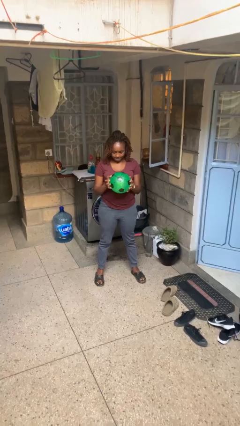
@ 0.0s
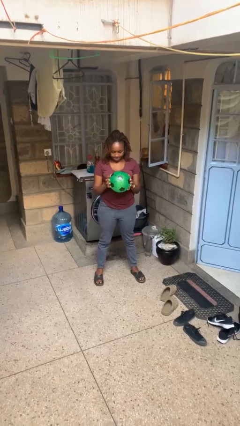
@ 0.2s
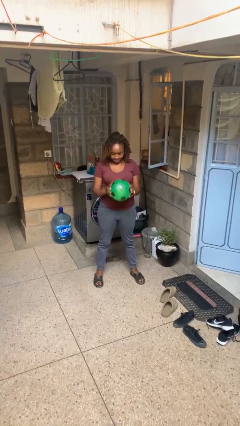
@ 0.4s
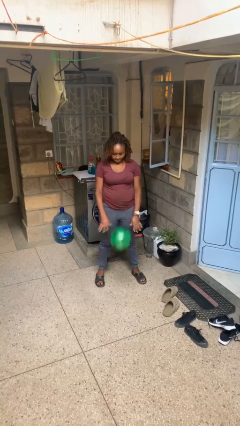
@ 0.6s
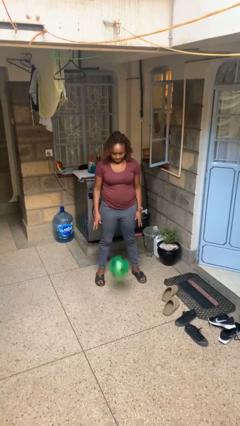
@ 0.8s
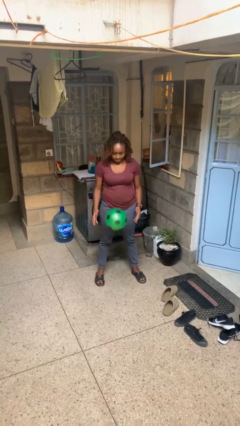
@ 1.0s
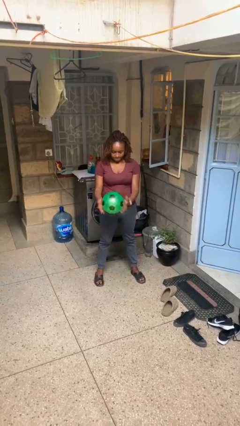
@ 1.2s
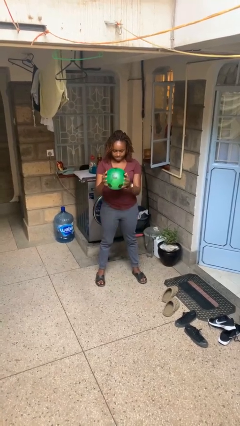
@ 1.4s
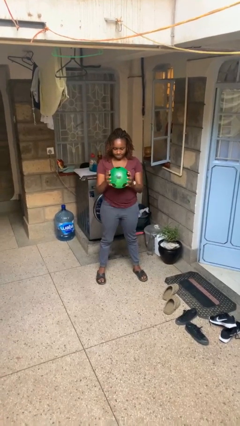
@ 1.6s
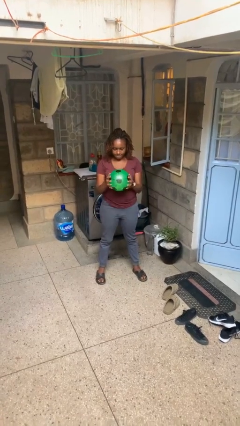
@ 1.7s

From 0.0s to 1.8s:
person bounces ball on floor

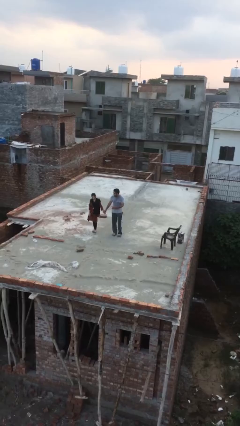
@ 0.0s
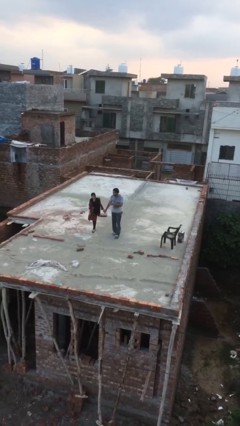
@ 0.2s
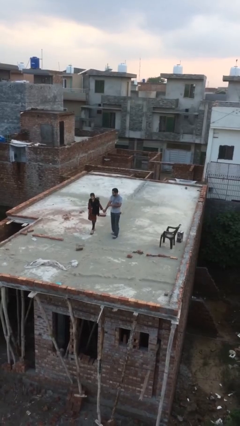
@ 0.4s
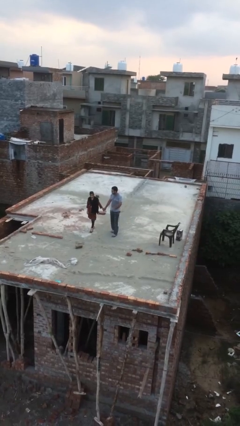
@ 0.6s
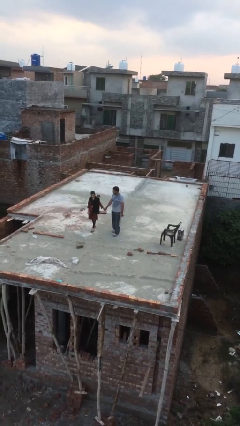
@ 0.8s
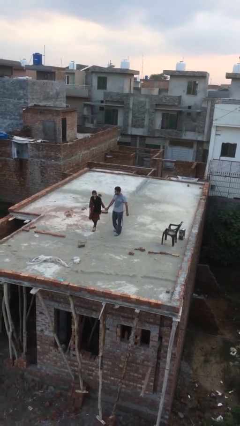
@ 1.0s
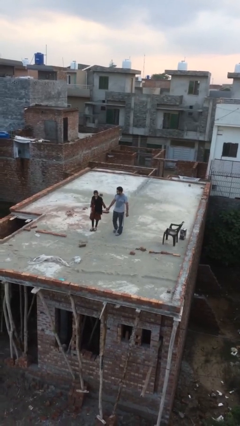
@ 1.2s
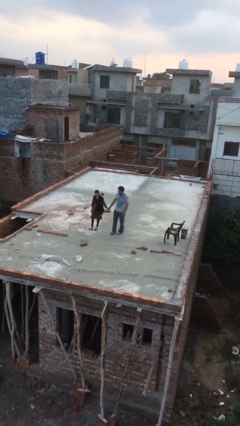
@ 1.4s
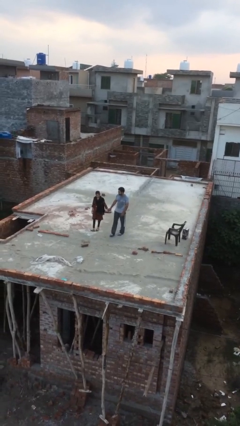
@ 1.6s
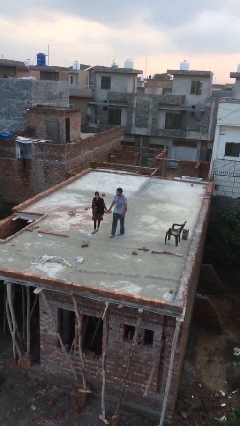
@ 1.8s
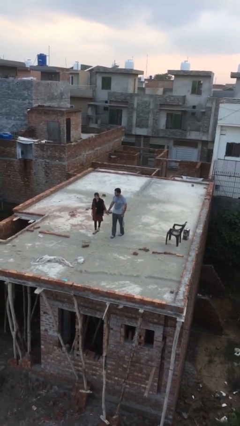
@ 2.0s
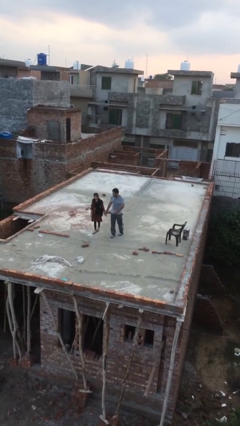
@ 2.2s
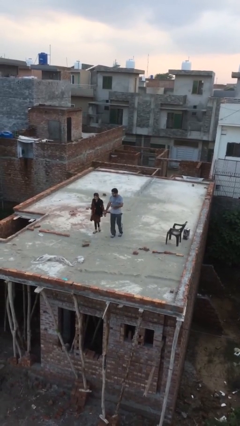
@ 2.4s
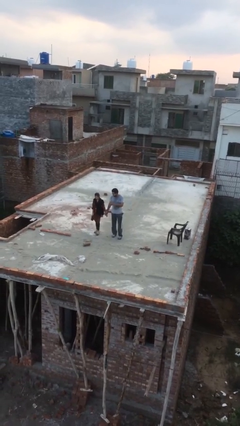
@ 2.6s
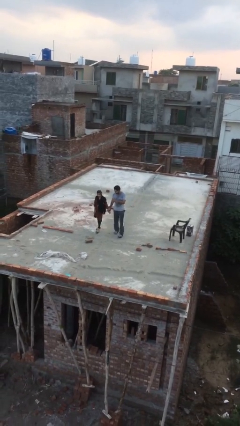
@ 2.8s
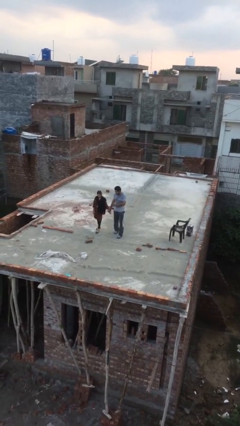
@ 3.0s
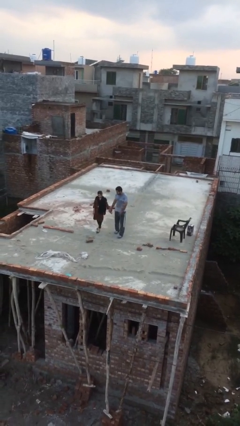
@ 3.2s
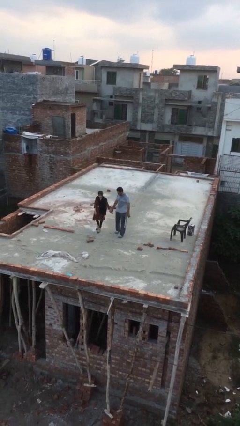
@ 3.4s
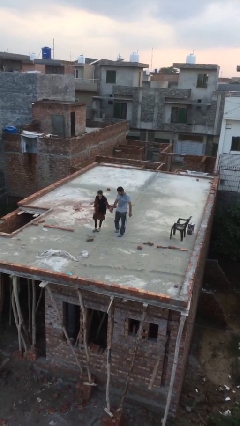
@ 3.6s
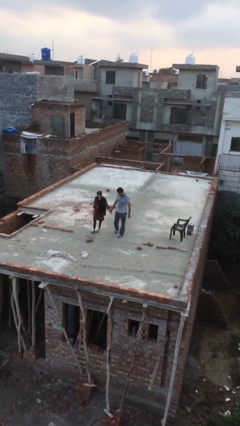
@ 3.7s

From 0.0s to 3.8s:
person holds hand

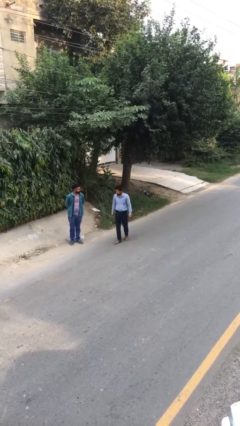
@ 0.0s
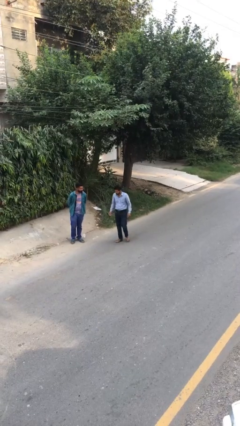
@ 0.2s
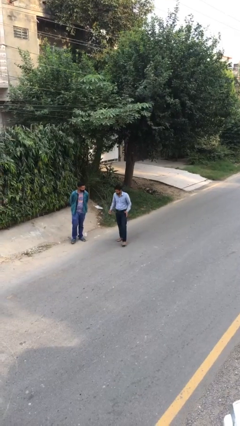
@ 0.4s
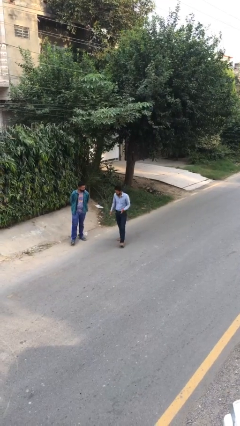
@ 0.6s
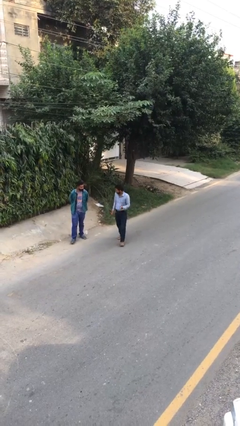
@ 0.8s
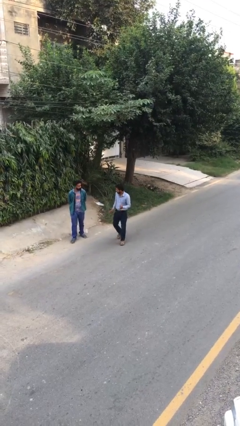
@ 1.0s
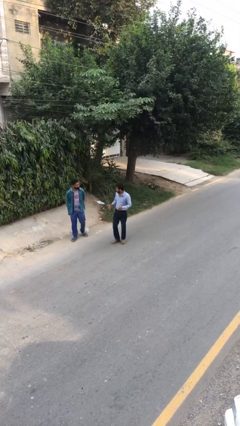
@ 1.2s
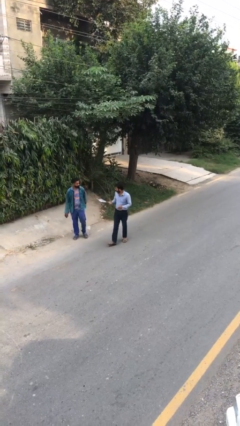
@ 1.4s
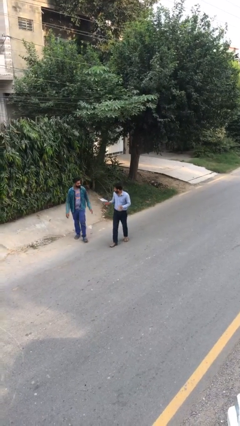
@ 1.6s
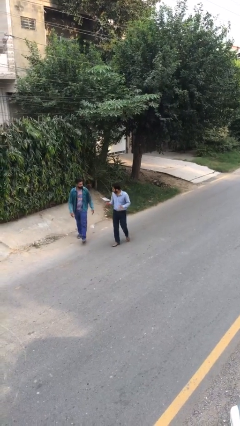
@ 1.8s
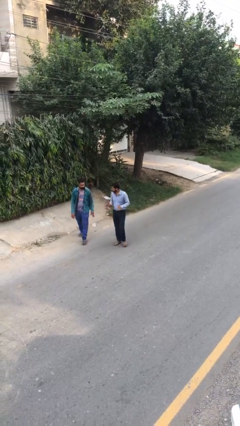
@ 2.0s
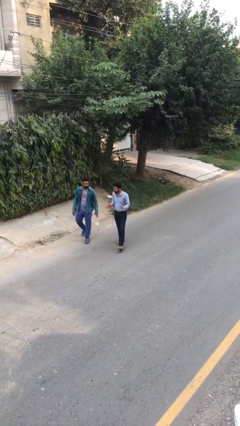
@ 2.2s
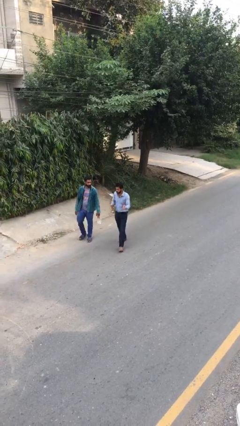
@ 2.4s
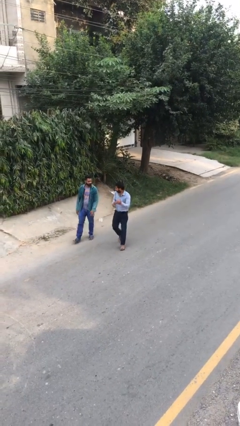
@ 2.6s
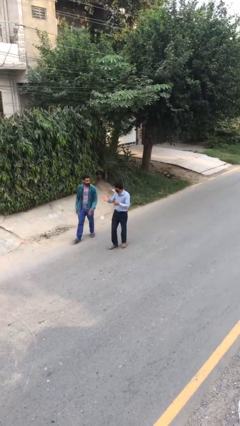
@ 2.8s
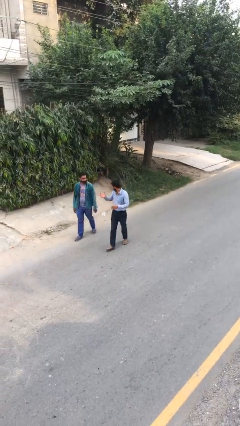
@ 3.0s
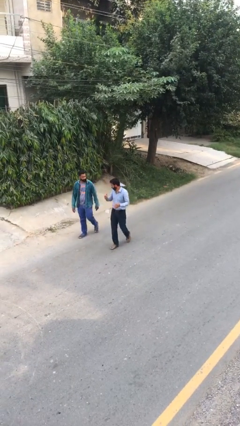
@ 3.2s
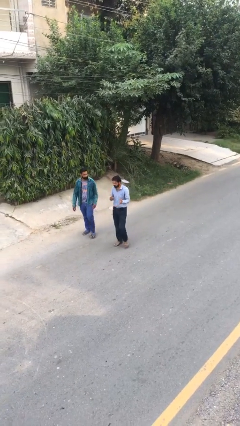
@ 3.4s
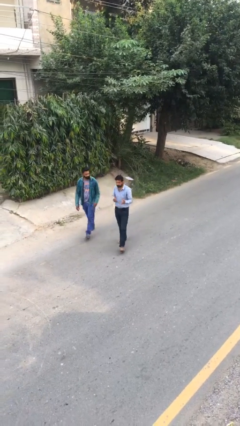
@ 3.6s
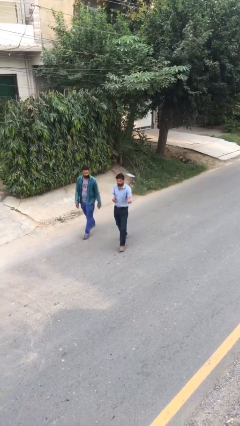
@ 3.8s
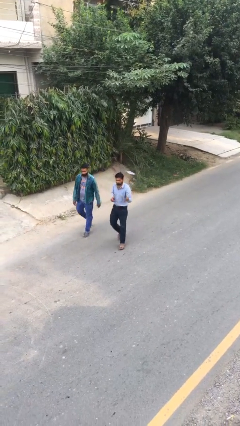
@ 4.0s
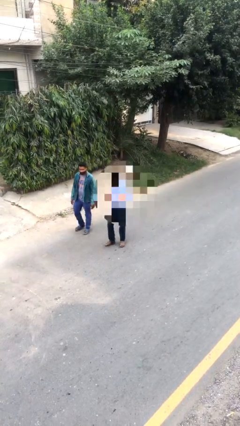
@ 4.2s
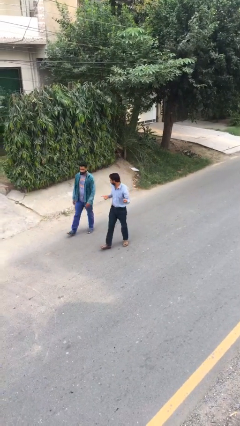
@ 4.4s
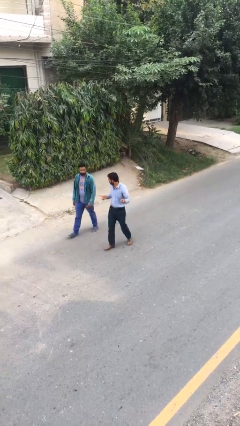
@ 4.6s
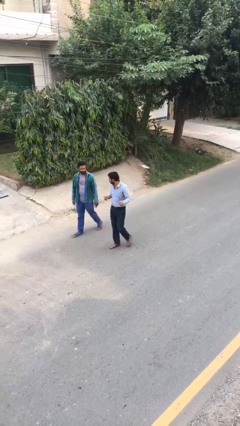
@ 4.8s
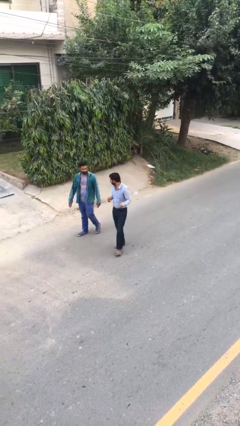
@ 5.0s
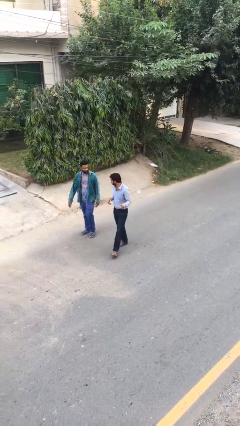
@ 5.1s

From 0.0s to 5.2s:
person talks to person

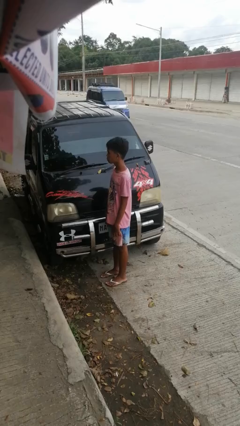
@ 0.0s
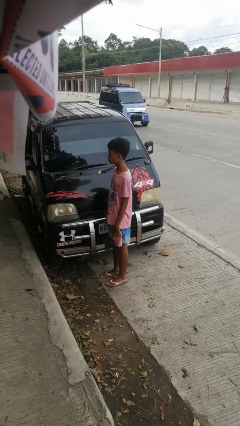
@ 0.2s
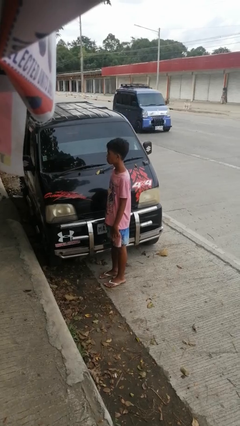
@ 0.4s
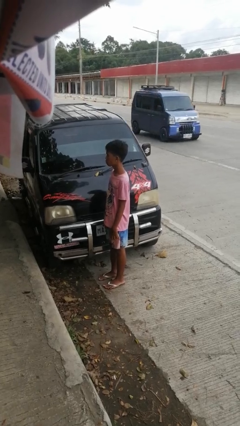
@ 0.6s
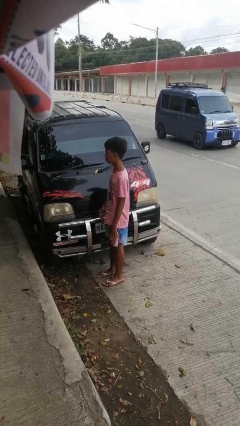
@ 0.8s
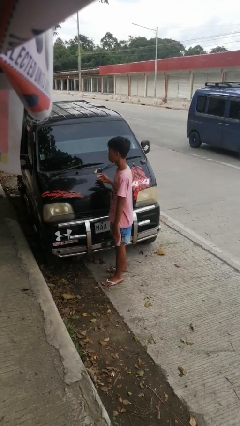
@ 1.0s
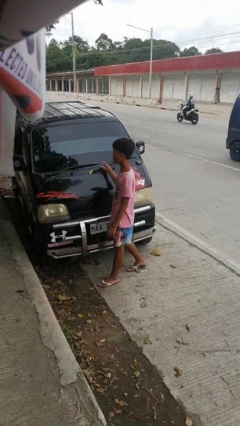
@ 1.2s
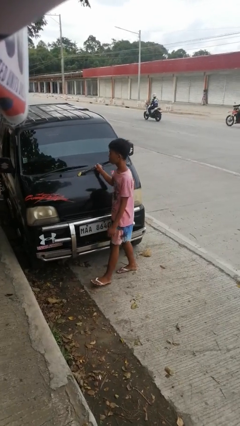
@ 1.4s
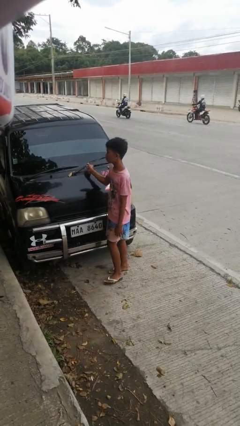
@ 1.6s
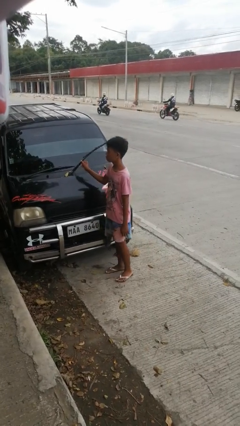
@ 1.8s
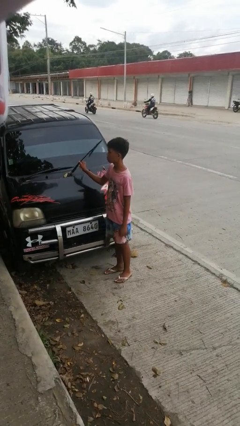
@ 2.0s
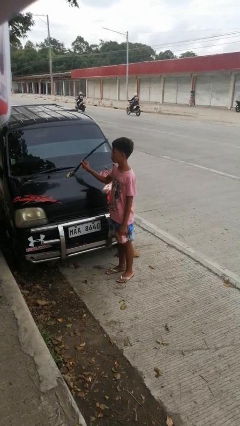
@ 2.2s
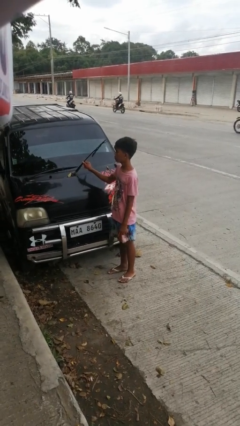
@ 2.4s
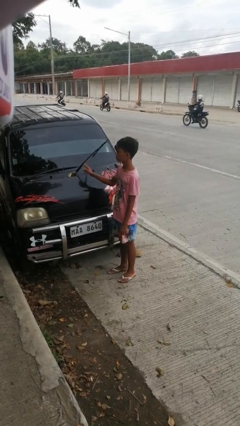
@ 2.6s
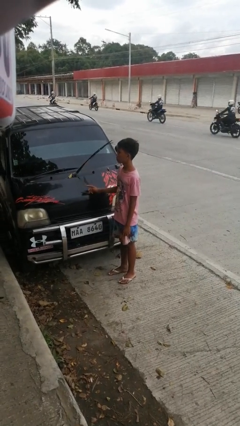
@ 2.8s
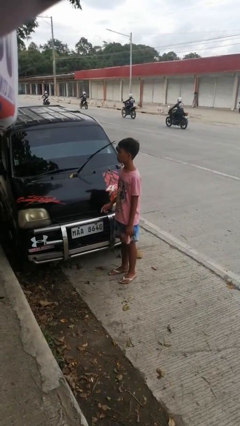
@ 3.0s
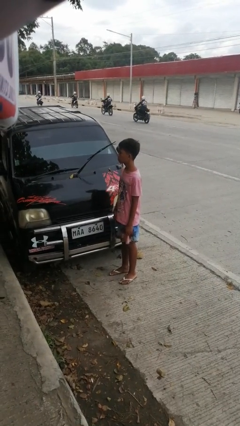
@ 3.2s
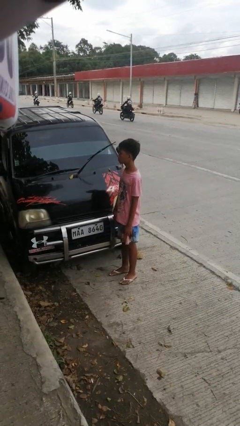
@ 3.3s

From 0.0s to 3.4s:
person flips up car wipers

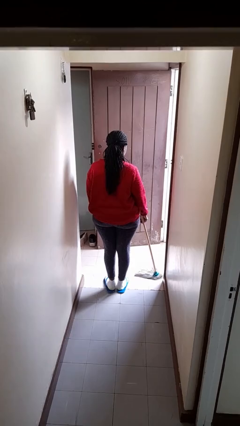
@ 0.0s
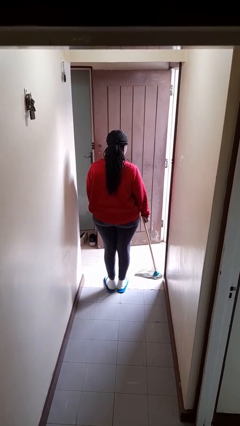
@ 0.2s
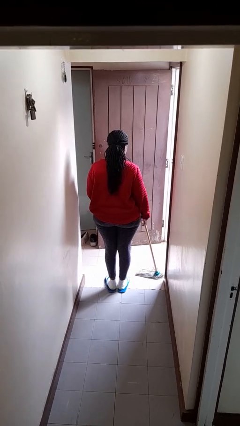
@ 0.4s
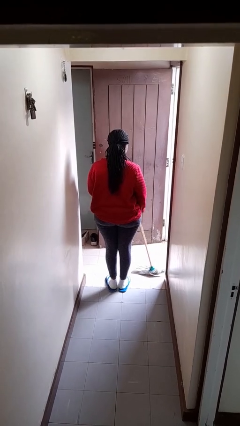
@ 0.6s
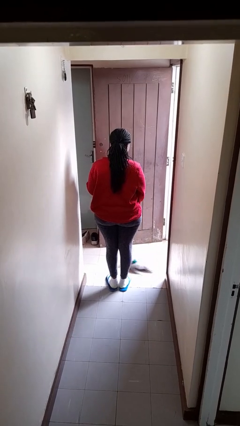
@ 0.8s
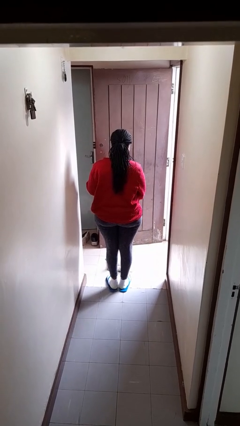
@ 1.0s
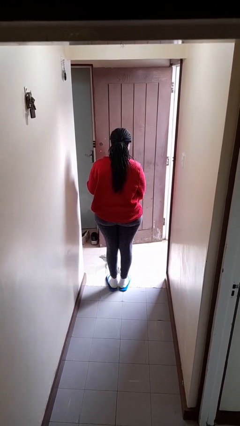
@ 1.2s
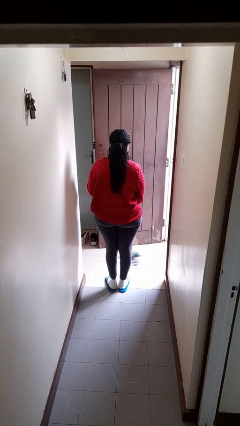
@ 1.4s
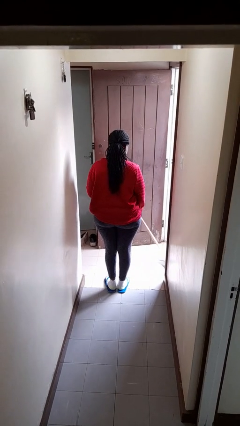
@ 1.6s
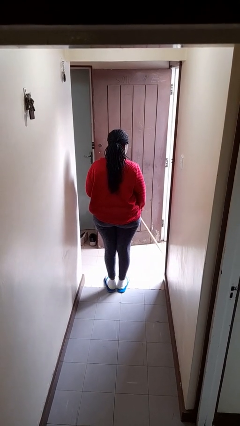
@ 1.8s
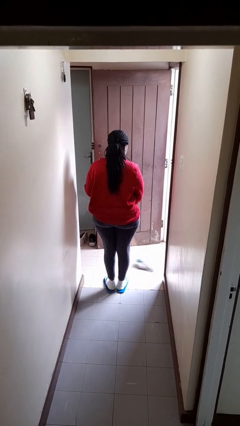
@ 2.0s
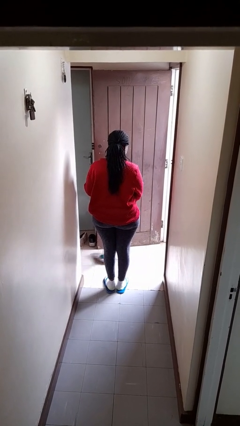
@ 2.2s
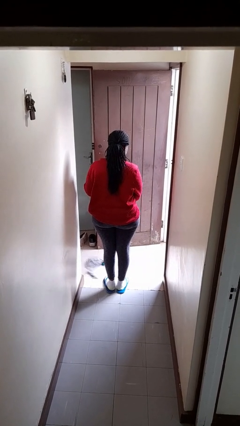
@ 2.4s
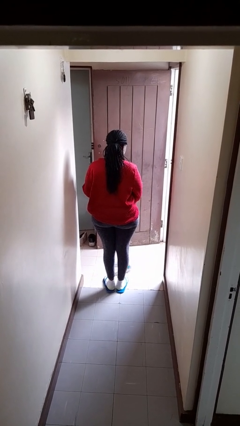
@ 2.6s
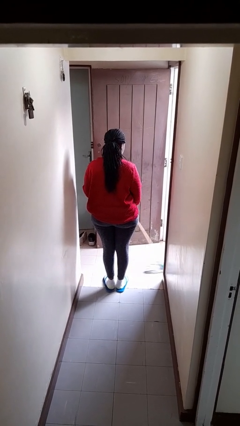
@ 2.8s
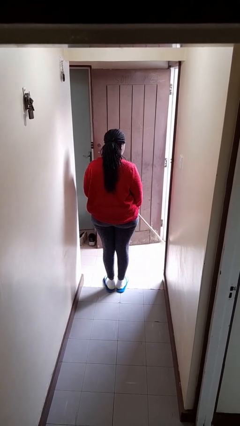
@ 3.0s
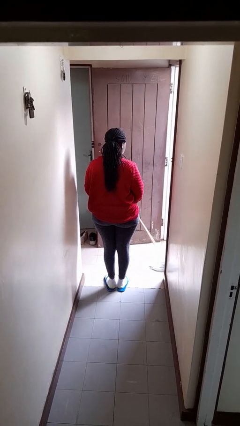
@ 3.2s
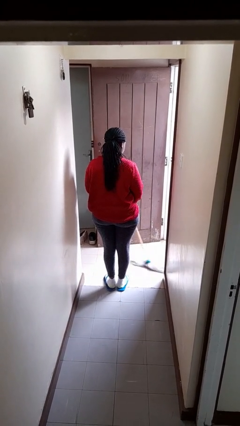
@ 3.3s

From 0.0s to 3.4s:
person mops

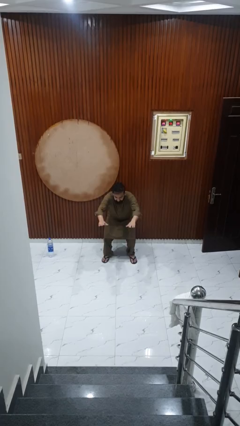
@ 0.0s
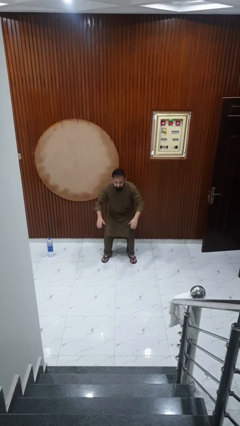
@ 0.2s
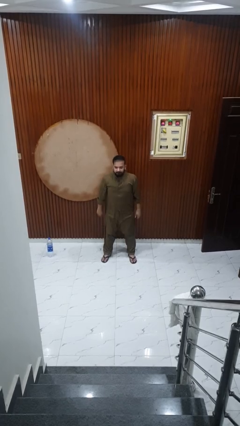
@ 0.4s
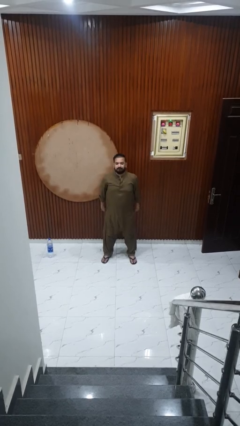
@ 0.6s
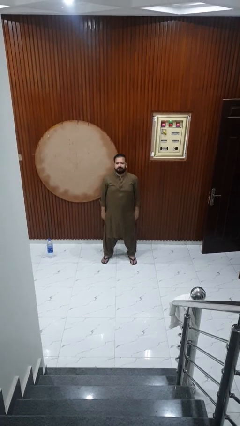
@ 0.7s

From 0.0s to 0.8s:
person stands up
